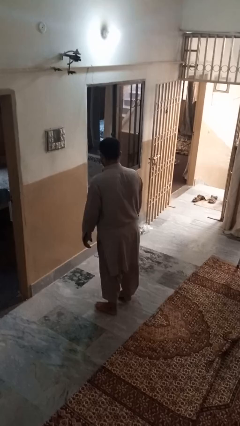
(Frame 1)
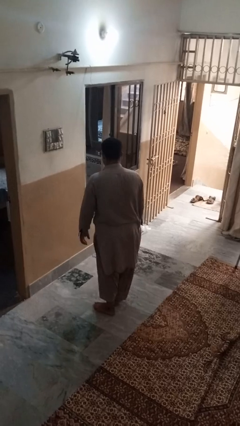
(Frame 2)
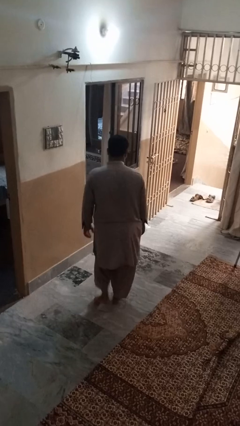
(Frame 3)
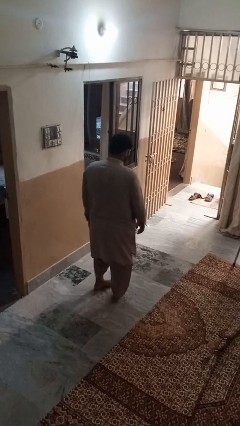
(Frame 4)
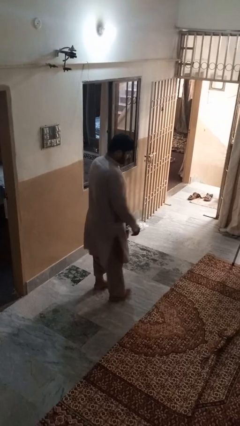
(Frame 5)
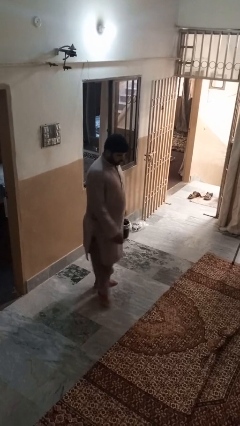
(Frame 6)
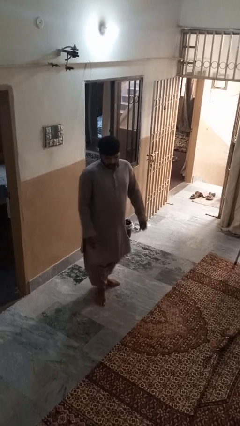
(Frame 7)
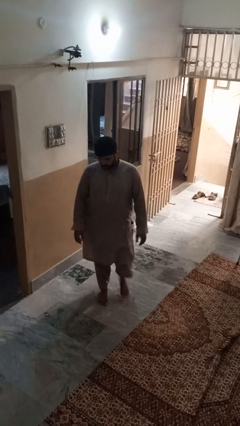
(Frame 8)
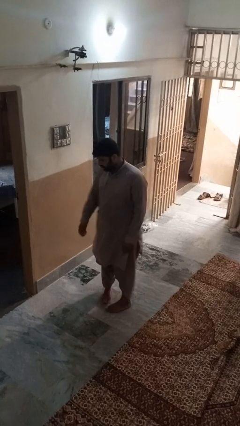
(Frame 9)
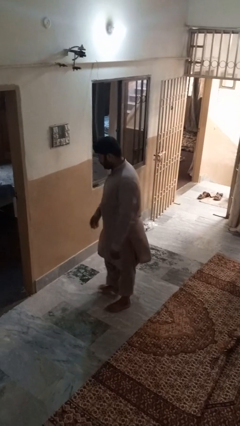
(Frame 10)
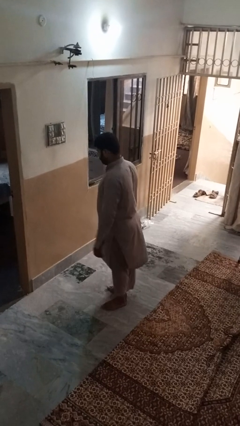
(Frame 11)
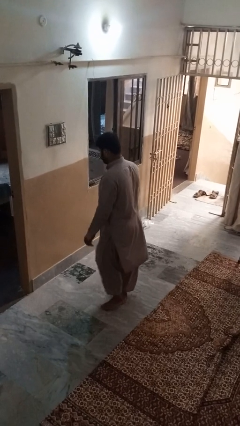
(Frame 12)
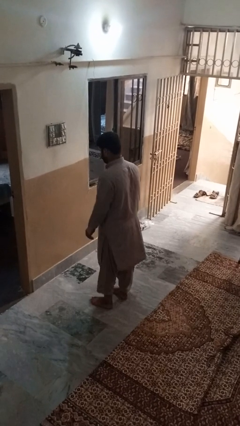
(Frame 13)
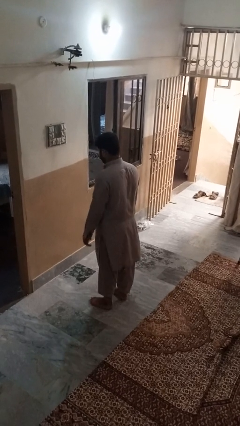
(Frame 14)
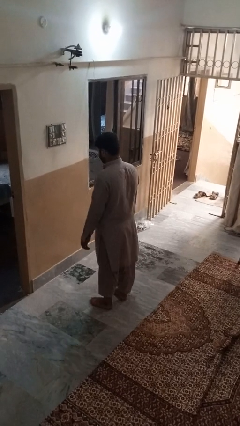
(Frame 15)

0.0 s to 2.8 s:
person twirls

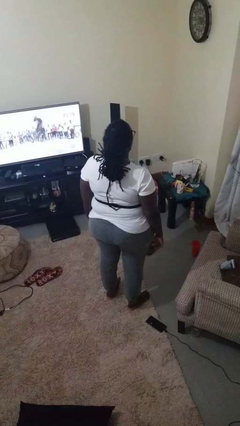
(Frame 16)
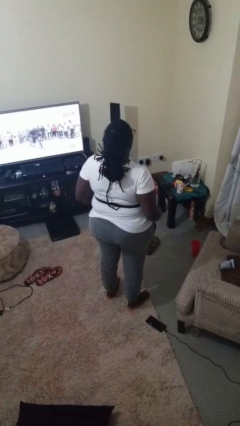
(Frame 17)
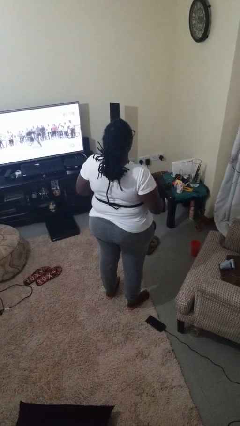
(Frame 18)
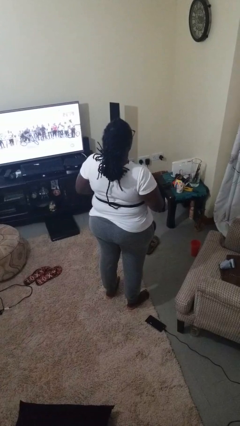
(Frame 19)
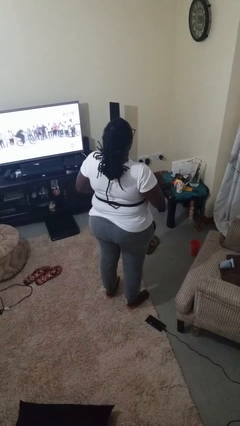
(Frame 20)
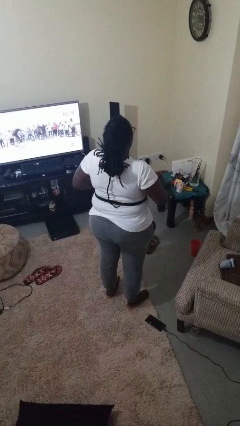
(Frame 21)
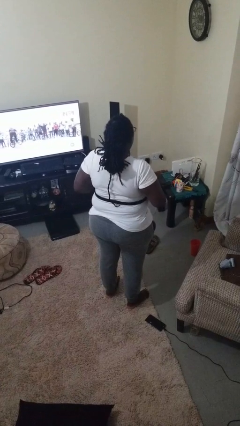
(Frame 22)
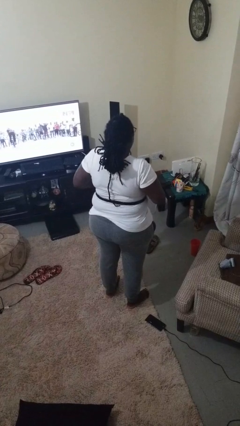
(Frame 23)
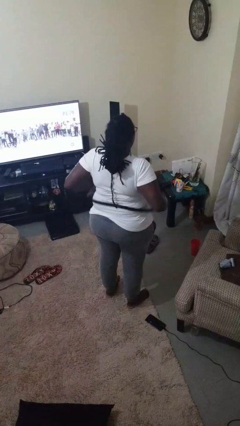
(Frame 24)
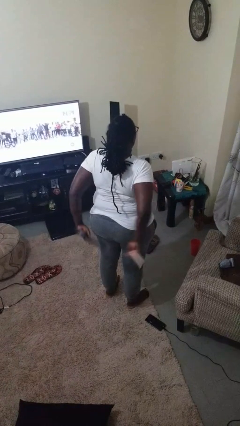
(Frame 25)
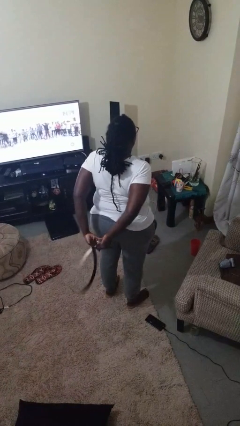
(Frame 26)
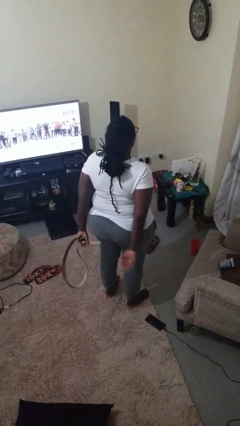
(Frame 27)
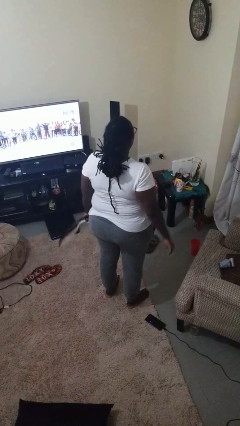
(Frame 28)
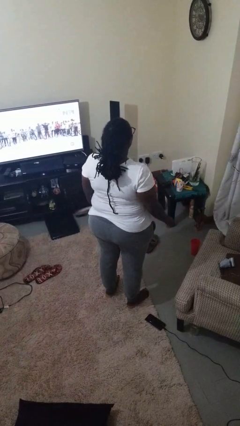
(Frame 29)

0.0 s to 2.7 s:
person takes off belt

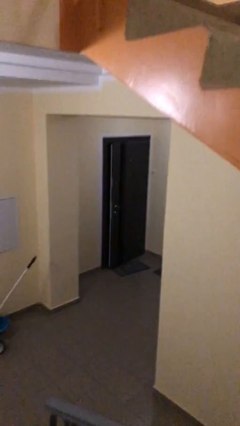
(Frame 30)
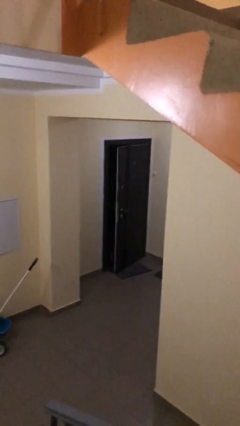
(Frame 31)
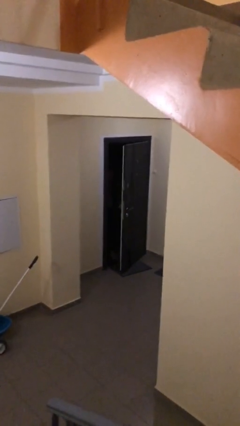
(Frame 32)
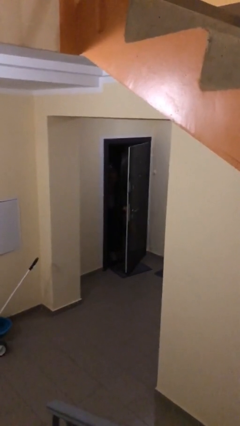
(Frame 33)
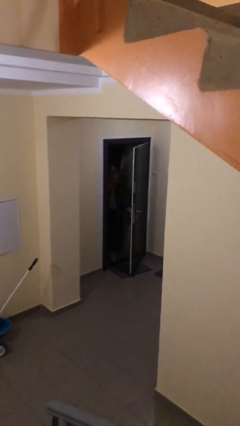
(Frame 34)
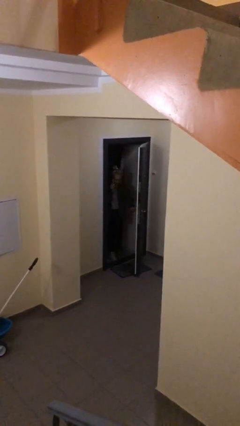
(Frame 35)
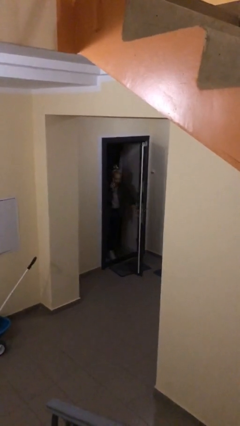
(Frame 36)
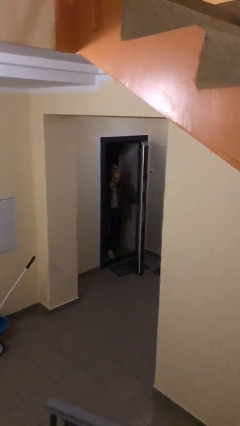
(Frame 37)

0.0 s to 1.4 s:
person opens facility door

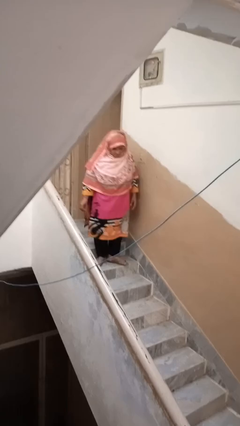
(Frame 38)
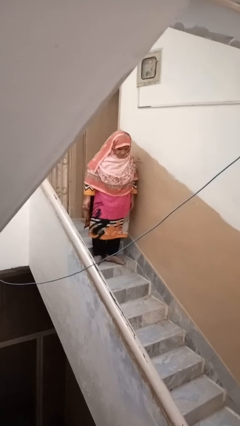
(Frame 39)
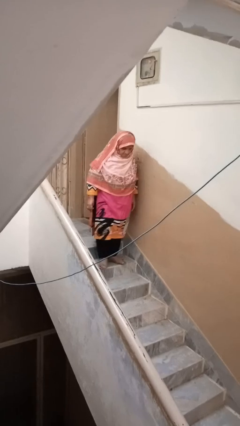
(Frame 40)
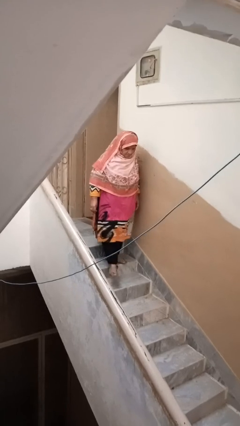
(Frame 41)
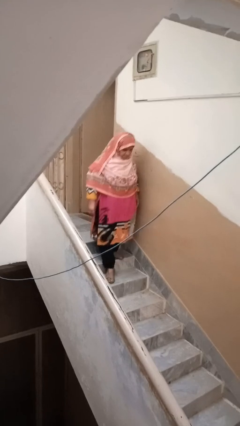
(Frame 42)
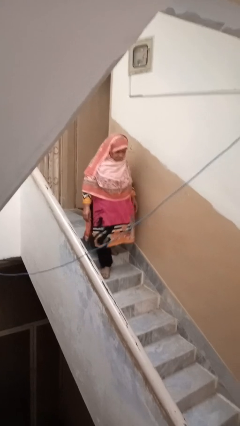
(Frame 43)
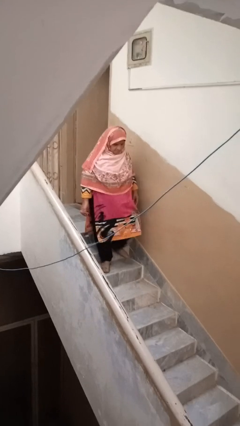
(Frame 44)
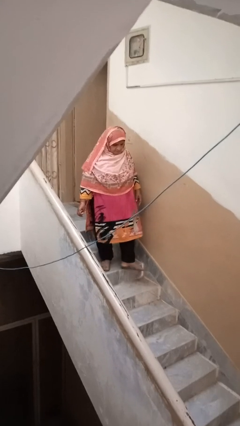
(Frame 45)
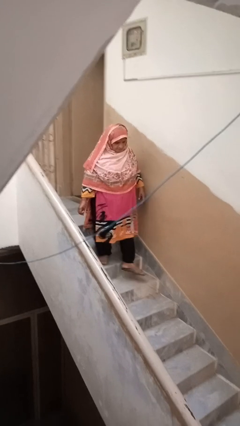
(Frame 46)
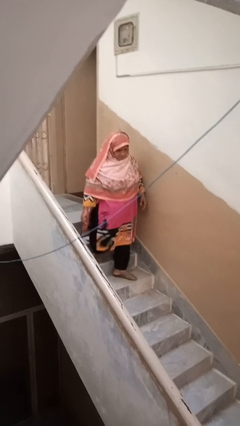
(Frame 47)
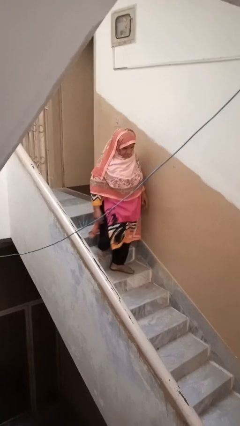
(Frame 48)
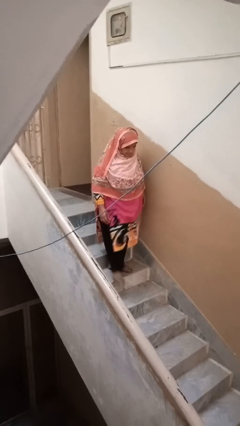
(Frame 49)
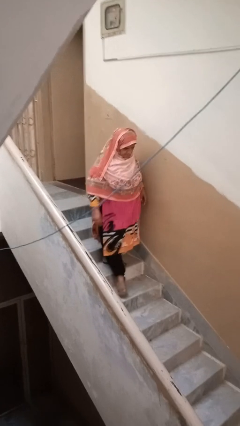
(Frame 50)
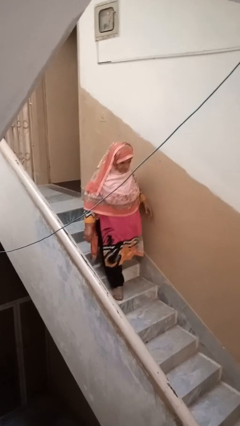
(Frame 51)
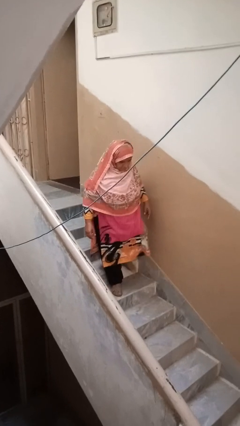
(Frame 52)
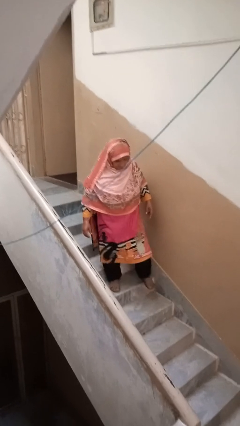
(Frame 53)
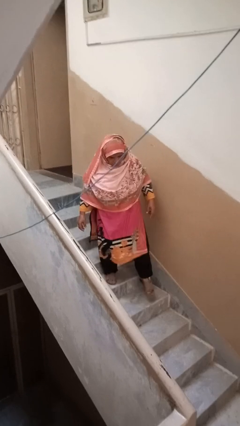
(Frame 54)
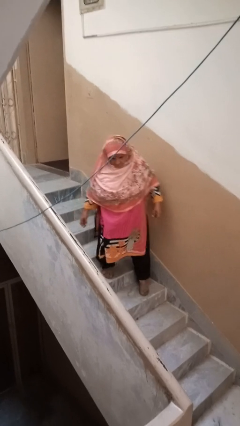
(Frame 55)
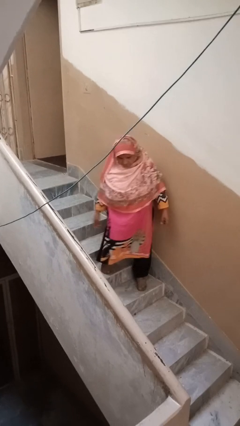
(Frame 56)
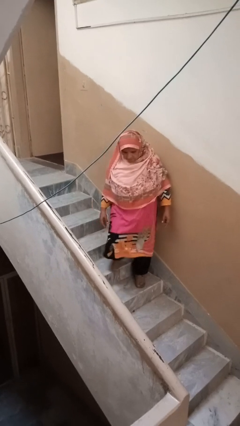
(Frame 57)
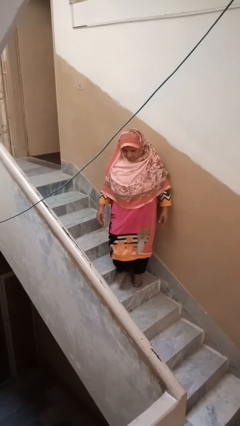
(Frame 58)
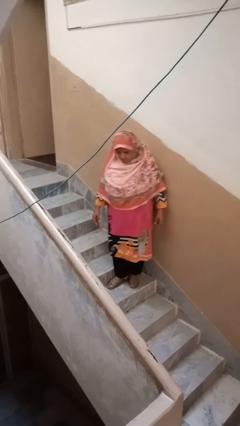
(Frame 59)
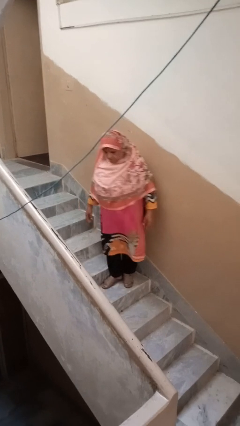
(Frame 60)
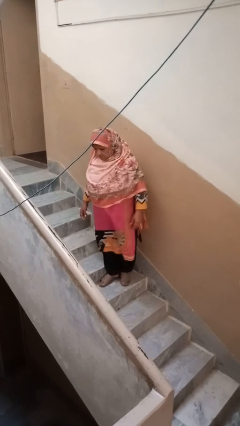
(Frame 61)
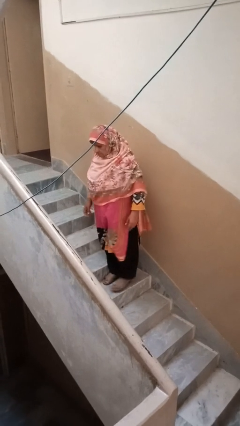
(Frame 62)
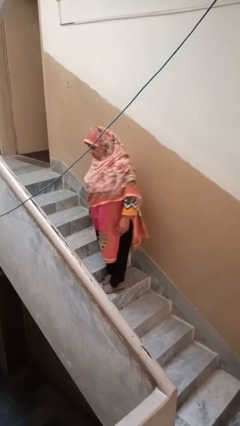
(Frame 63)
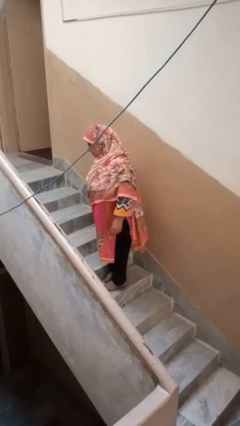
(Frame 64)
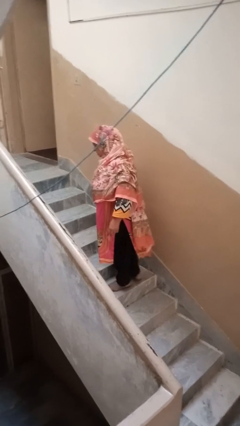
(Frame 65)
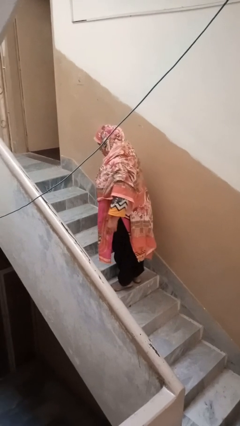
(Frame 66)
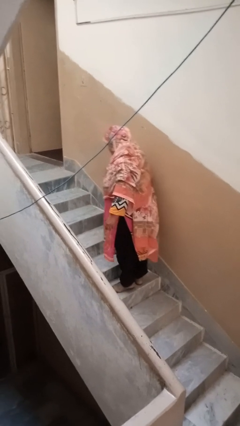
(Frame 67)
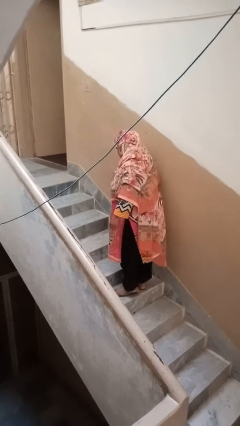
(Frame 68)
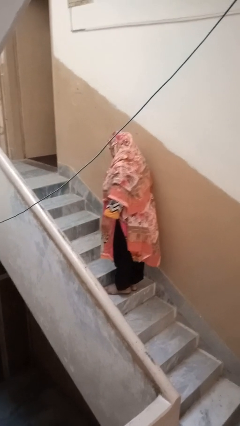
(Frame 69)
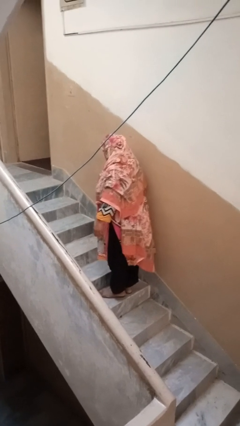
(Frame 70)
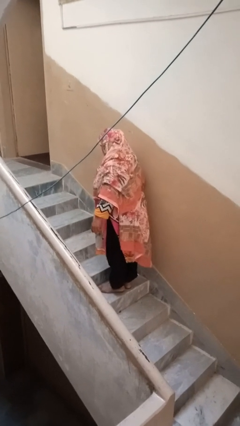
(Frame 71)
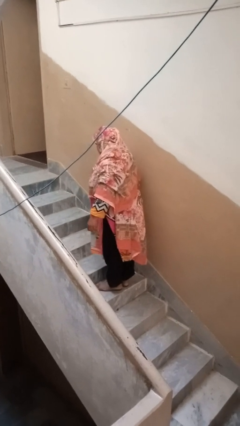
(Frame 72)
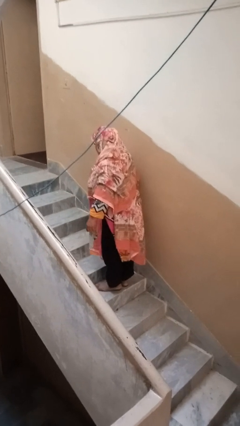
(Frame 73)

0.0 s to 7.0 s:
person climbs down stairs

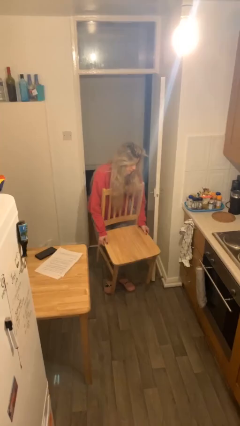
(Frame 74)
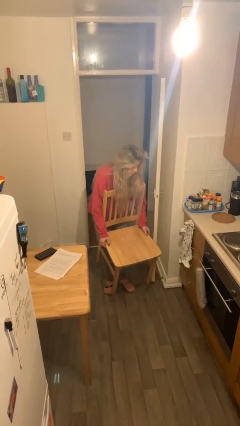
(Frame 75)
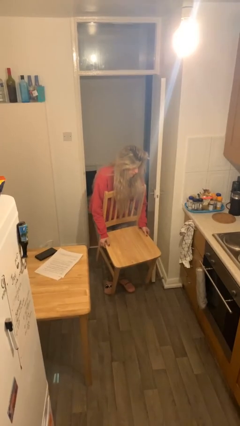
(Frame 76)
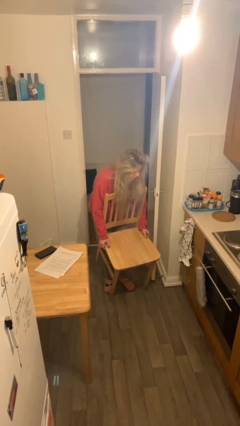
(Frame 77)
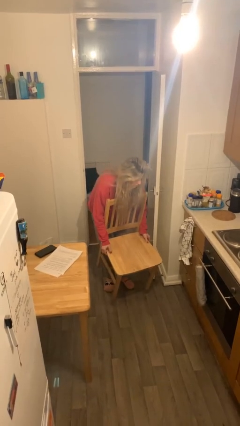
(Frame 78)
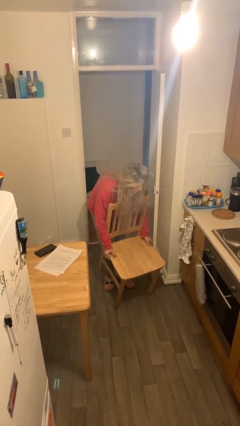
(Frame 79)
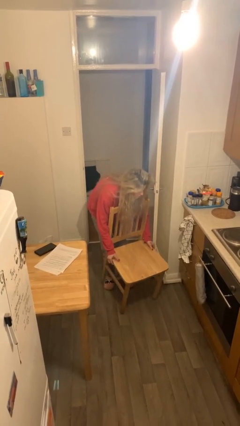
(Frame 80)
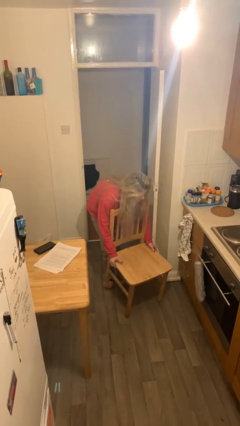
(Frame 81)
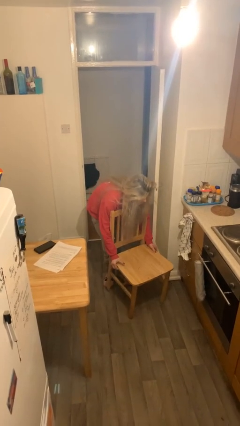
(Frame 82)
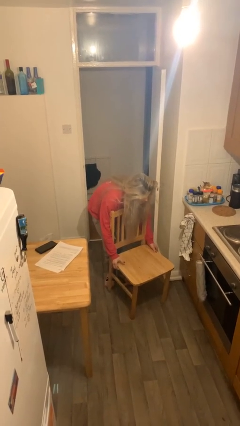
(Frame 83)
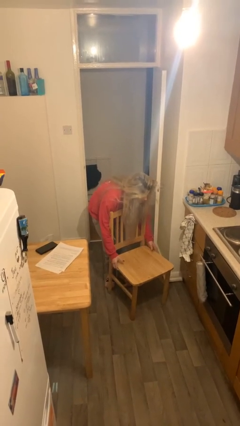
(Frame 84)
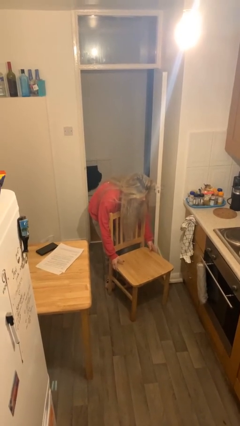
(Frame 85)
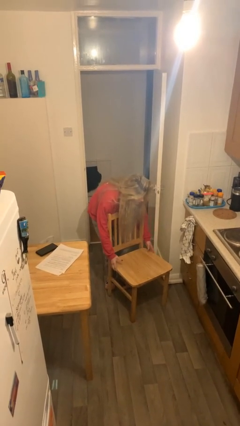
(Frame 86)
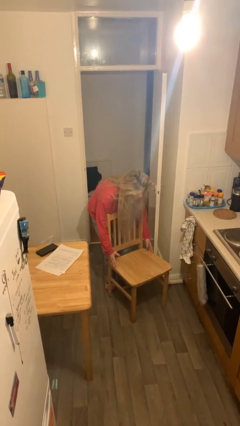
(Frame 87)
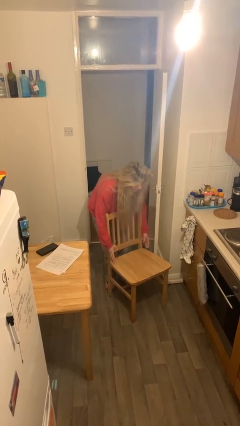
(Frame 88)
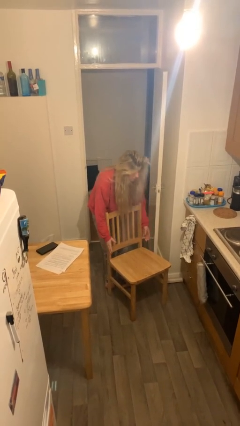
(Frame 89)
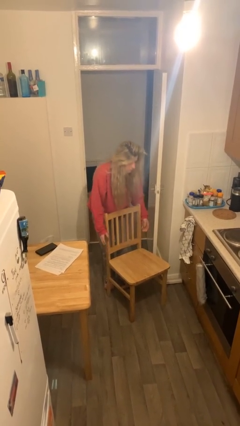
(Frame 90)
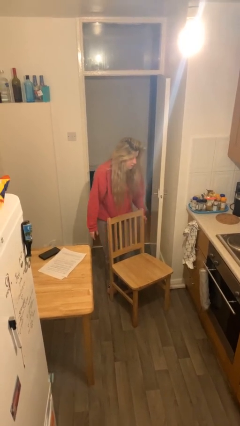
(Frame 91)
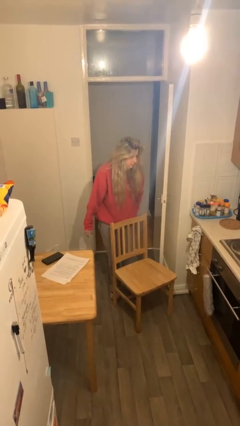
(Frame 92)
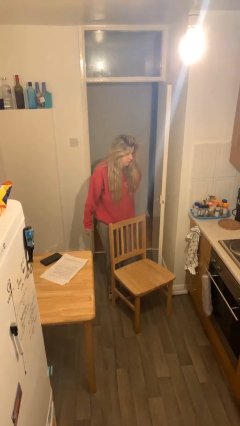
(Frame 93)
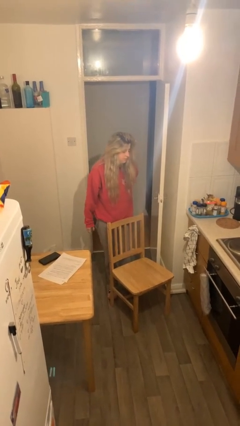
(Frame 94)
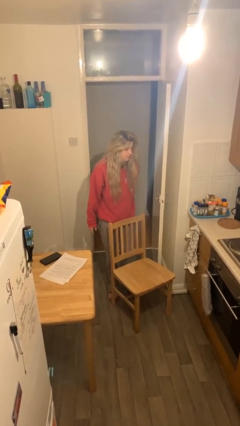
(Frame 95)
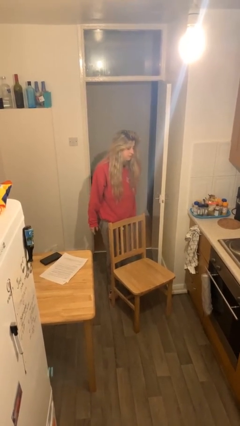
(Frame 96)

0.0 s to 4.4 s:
person puts down object on floor
